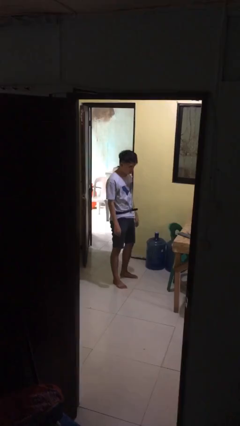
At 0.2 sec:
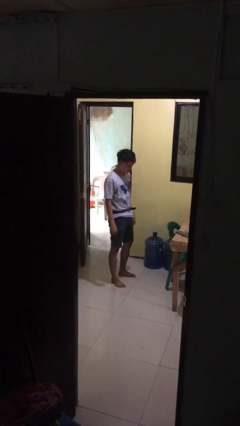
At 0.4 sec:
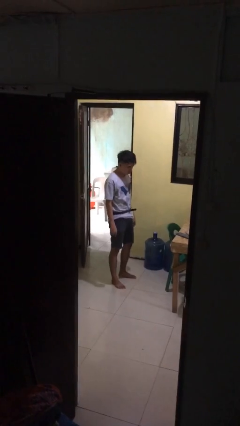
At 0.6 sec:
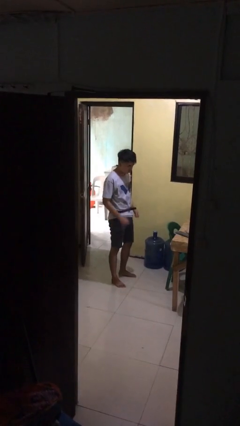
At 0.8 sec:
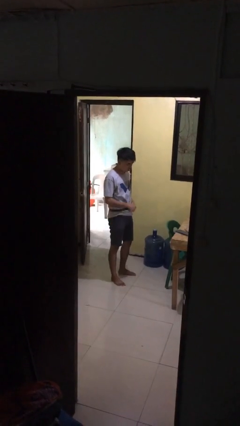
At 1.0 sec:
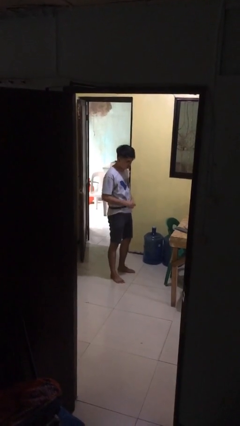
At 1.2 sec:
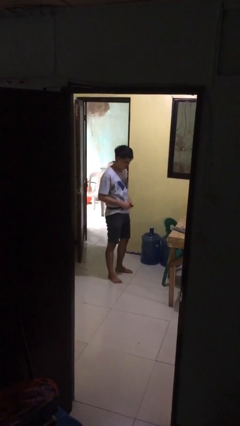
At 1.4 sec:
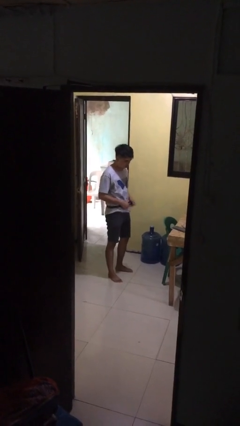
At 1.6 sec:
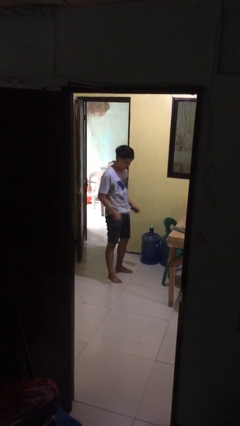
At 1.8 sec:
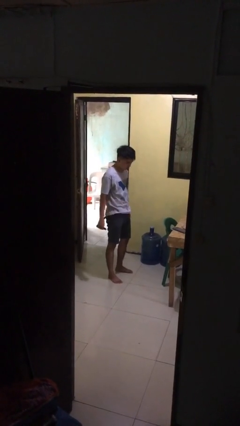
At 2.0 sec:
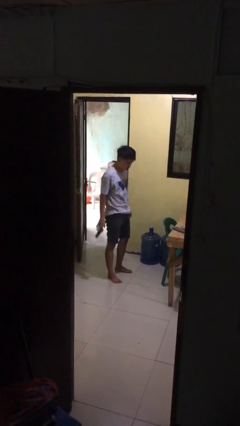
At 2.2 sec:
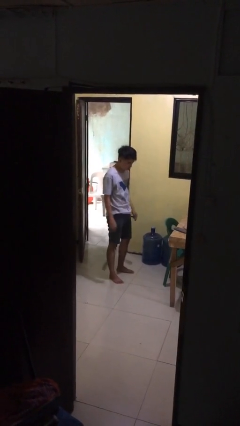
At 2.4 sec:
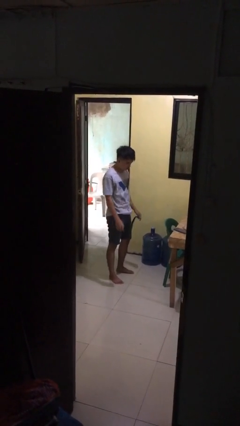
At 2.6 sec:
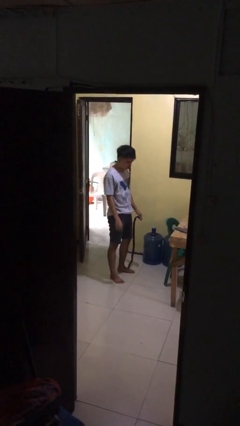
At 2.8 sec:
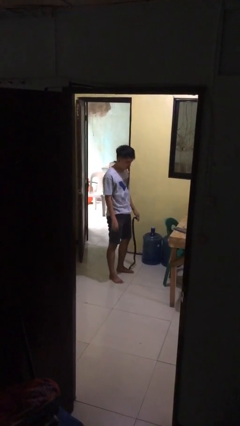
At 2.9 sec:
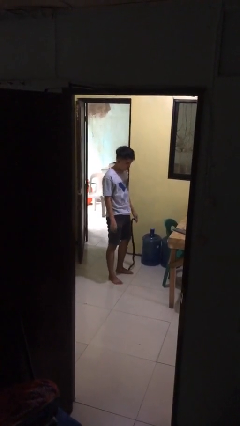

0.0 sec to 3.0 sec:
person takes off belt

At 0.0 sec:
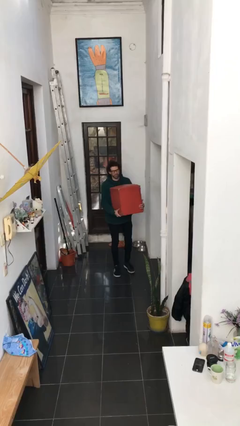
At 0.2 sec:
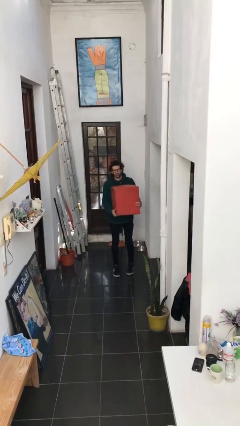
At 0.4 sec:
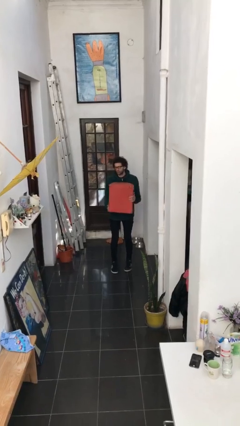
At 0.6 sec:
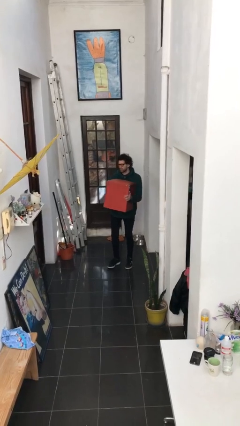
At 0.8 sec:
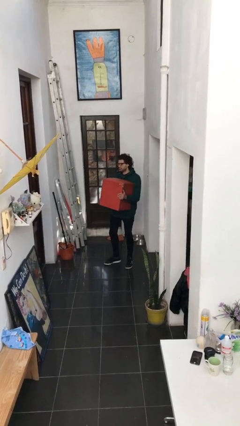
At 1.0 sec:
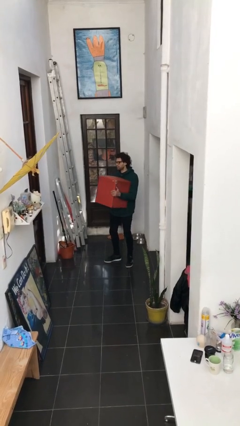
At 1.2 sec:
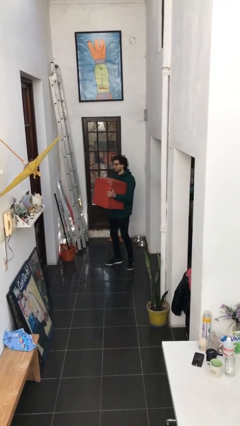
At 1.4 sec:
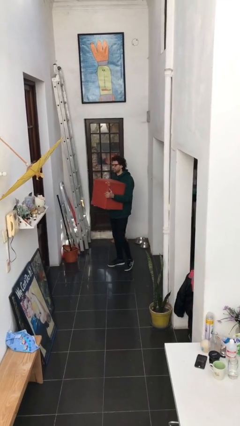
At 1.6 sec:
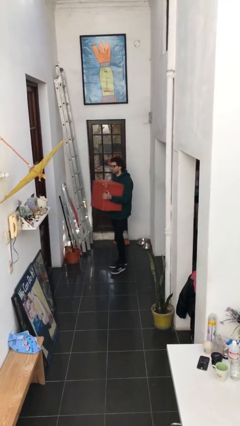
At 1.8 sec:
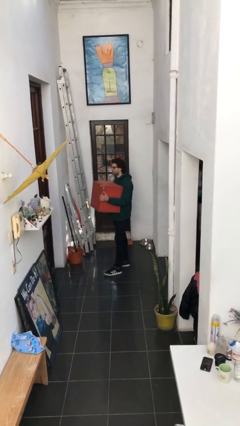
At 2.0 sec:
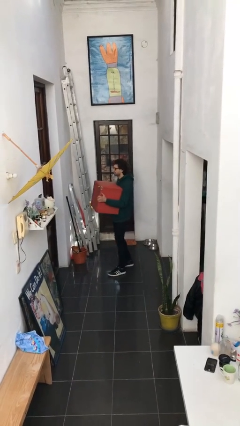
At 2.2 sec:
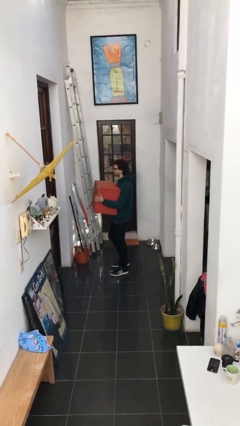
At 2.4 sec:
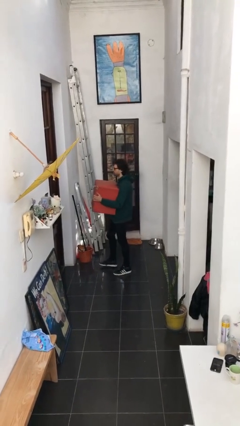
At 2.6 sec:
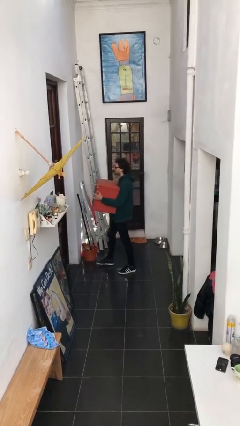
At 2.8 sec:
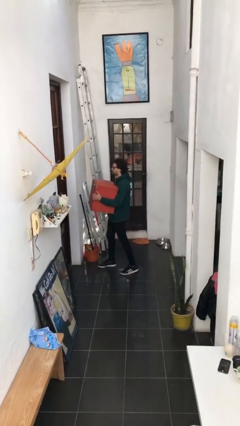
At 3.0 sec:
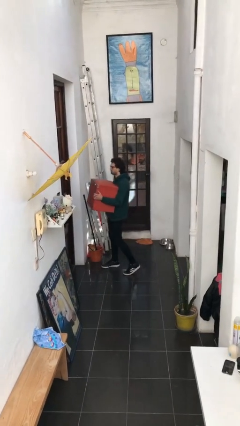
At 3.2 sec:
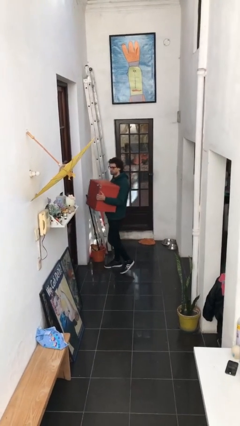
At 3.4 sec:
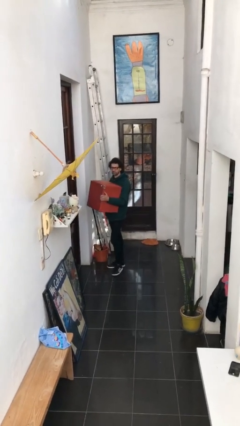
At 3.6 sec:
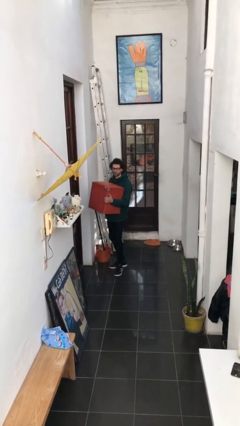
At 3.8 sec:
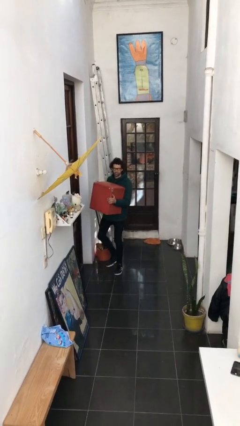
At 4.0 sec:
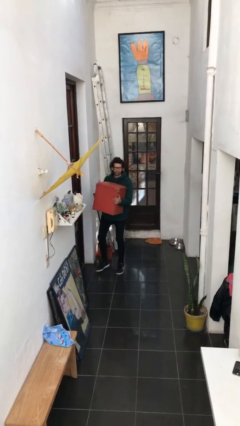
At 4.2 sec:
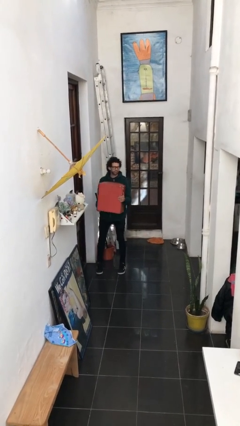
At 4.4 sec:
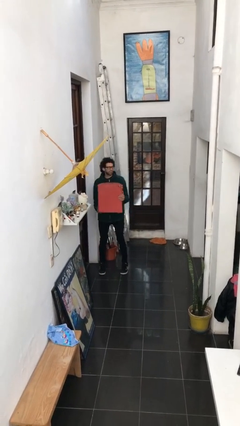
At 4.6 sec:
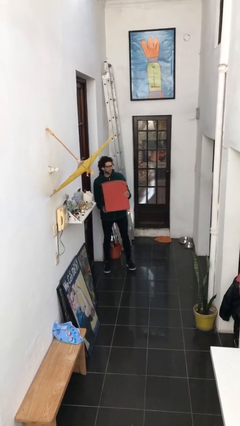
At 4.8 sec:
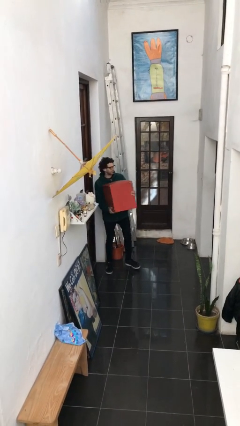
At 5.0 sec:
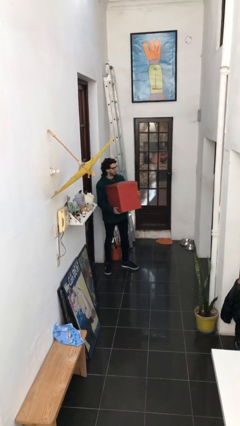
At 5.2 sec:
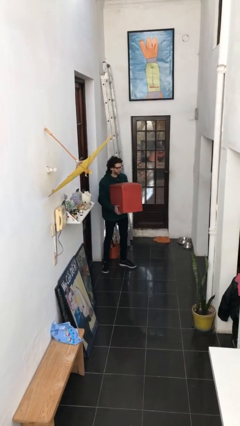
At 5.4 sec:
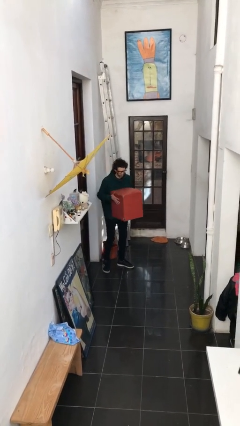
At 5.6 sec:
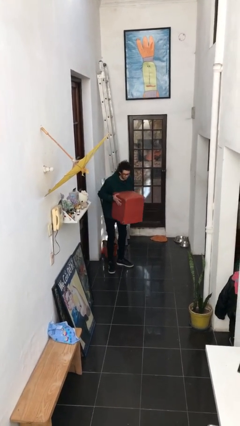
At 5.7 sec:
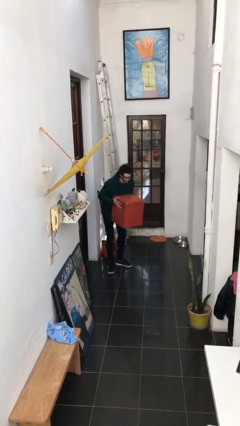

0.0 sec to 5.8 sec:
person carries heavy object

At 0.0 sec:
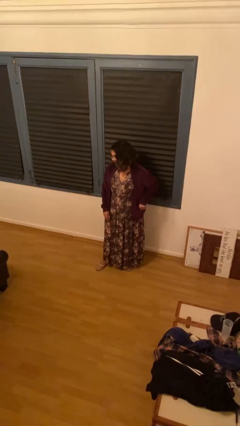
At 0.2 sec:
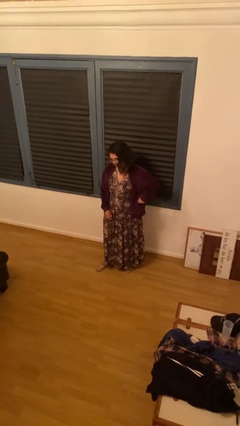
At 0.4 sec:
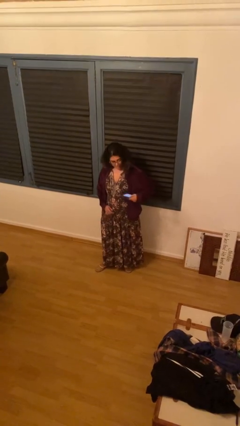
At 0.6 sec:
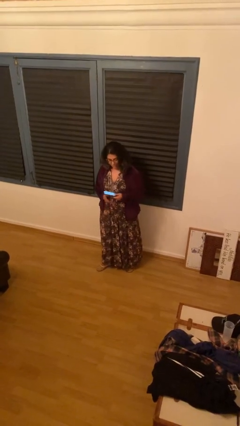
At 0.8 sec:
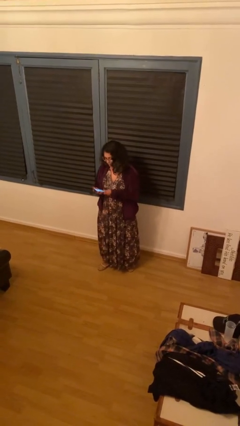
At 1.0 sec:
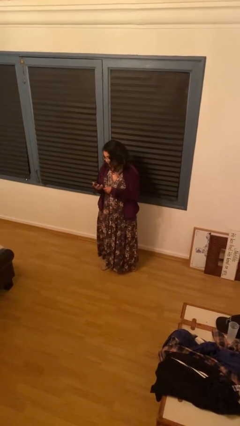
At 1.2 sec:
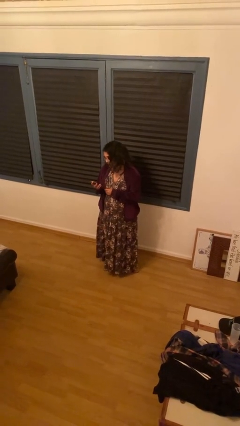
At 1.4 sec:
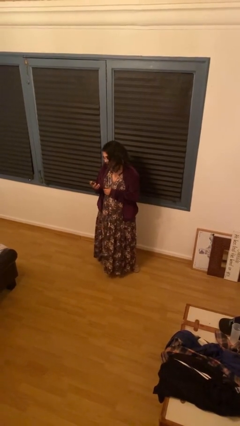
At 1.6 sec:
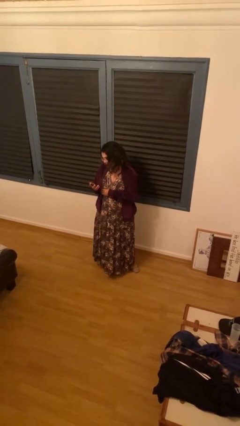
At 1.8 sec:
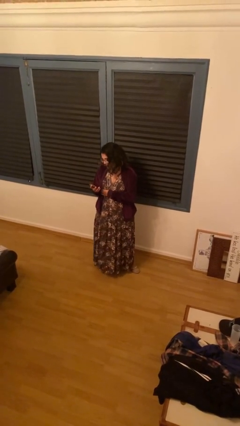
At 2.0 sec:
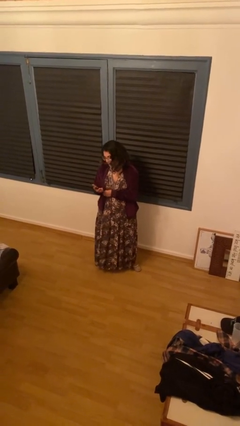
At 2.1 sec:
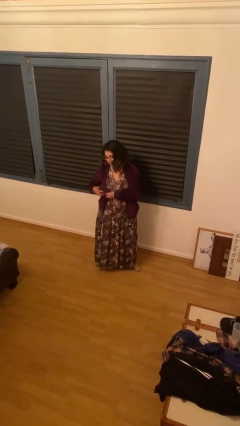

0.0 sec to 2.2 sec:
person takes phone from pocket

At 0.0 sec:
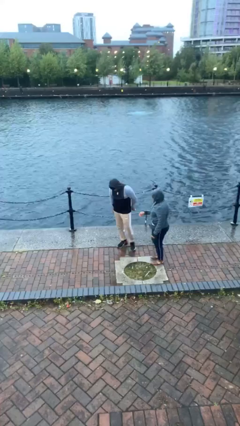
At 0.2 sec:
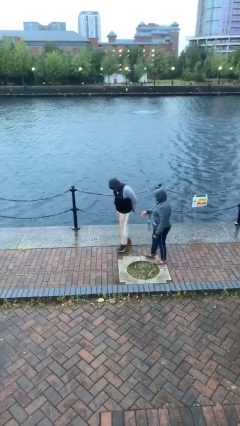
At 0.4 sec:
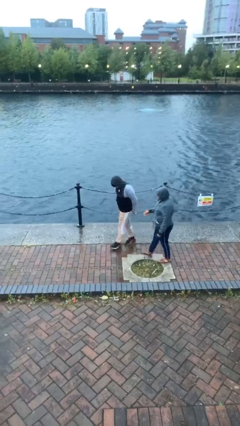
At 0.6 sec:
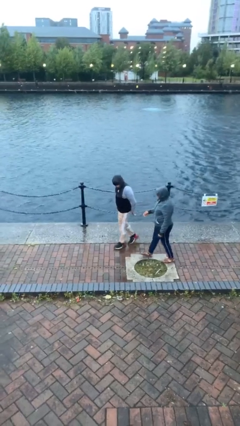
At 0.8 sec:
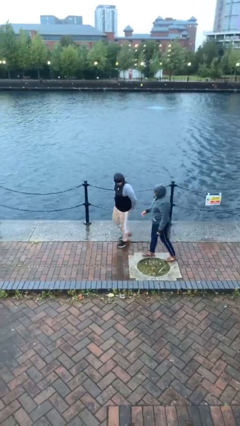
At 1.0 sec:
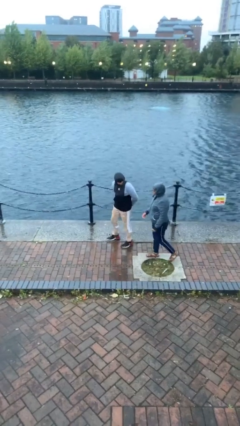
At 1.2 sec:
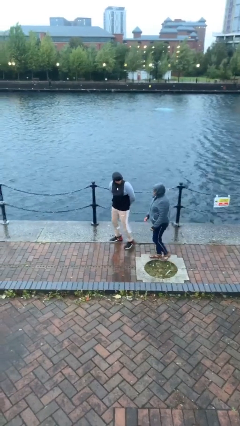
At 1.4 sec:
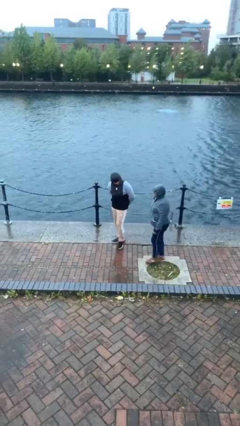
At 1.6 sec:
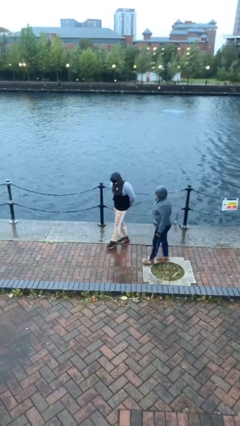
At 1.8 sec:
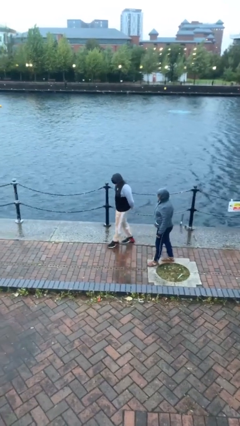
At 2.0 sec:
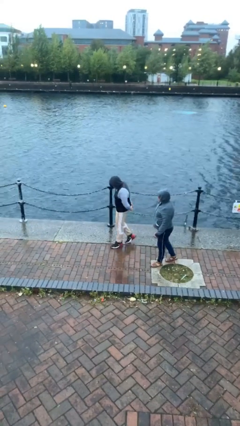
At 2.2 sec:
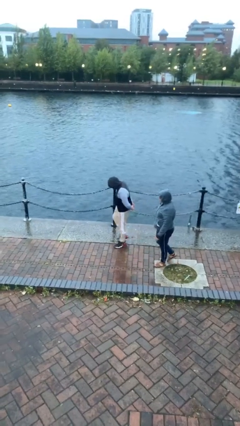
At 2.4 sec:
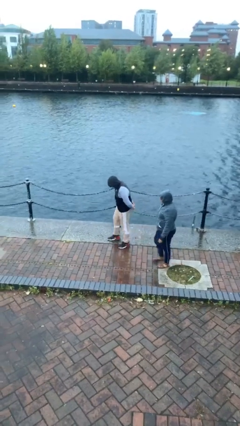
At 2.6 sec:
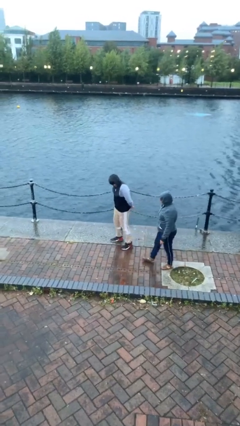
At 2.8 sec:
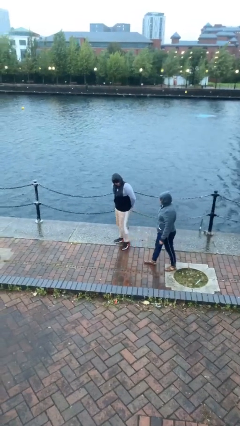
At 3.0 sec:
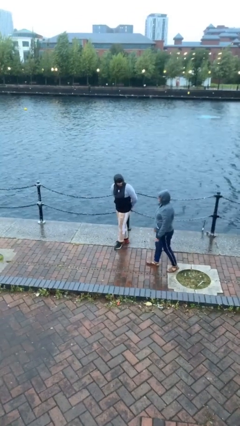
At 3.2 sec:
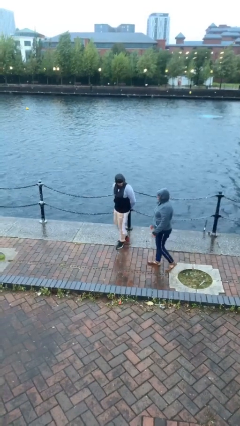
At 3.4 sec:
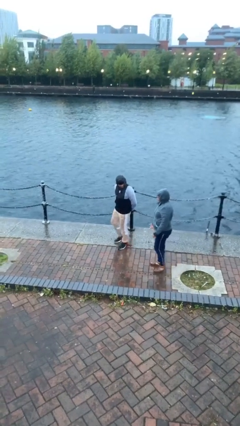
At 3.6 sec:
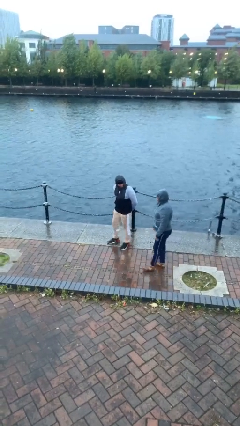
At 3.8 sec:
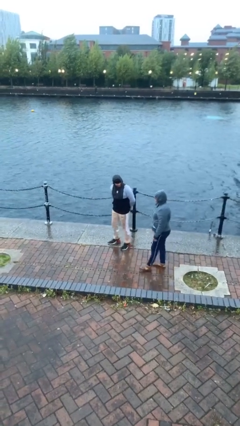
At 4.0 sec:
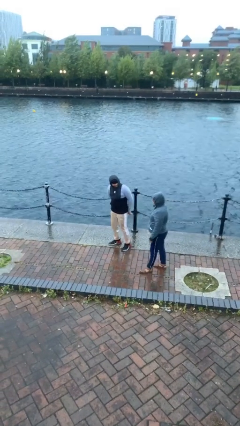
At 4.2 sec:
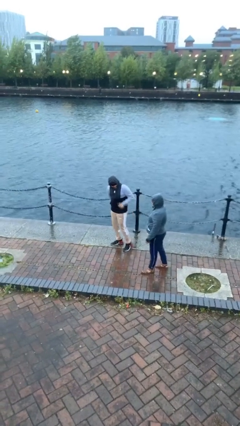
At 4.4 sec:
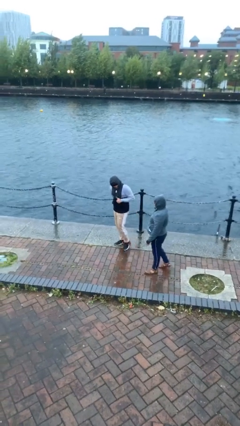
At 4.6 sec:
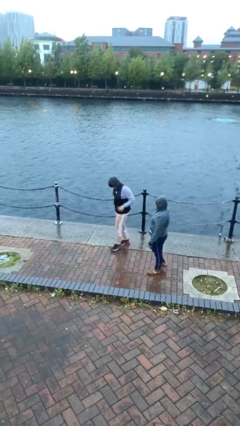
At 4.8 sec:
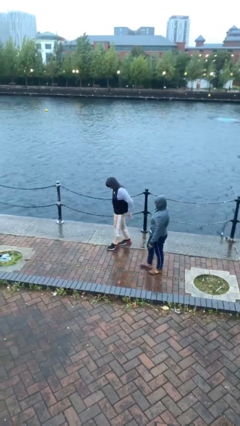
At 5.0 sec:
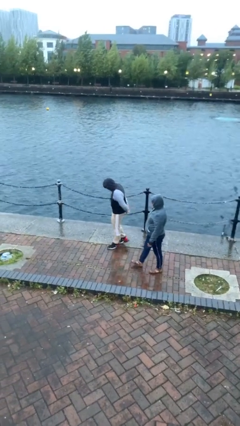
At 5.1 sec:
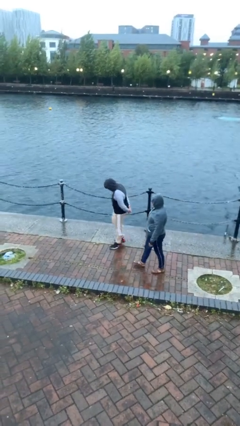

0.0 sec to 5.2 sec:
person talks to person

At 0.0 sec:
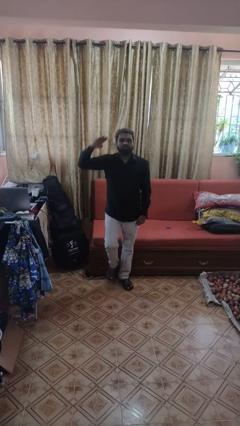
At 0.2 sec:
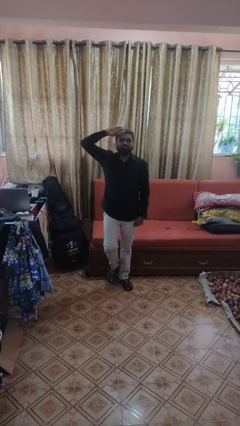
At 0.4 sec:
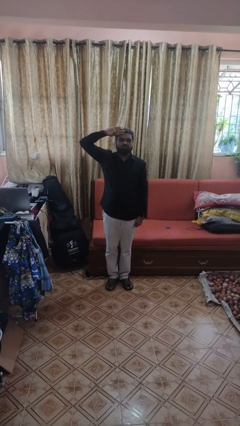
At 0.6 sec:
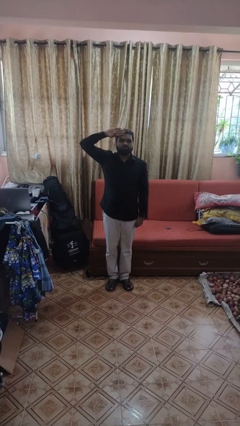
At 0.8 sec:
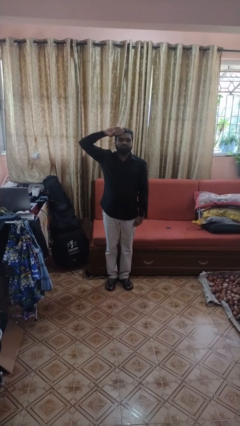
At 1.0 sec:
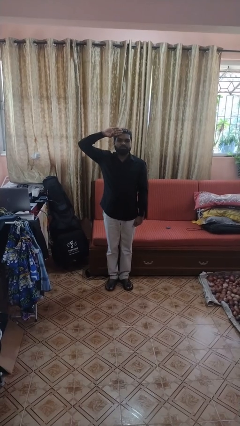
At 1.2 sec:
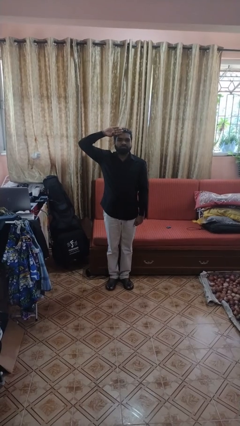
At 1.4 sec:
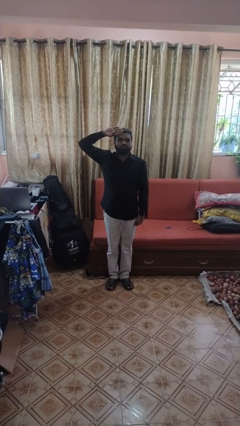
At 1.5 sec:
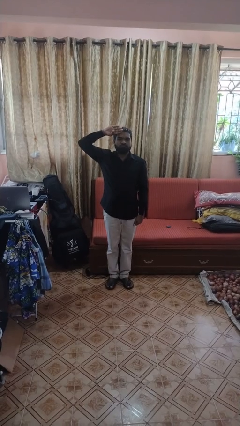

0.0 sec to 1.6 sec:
person salutes
